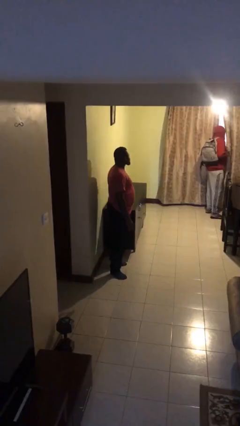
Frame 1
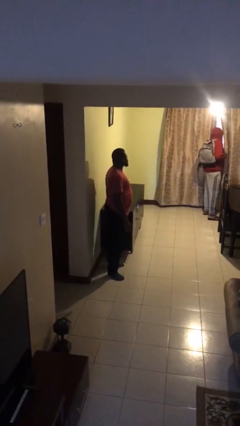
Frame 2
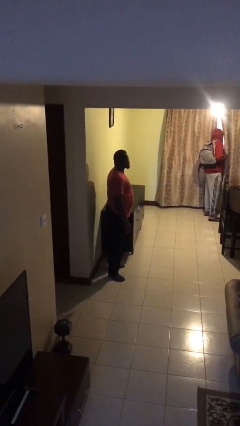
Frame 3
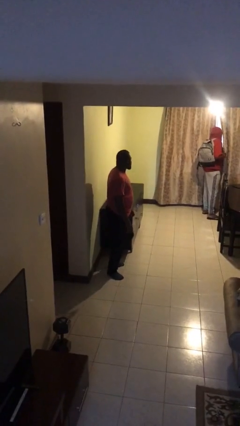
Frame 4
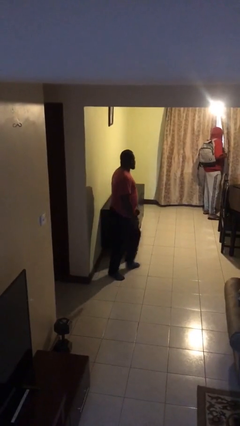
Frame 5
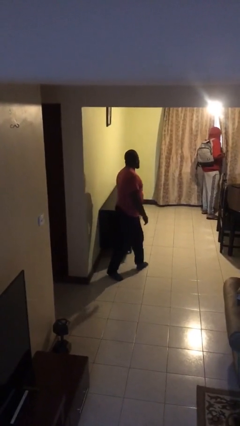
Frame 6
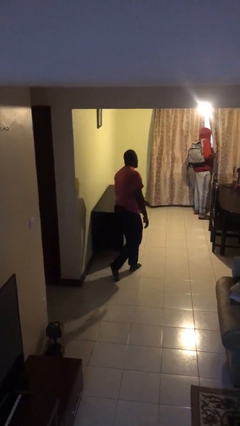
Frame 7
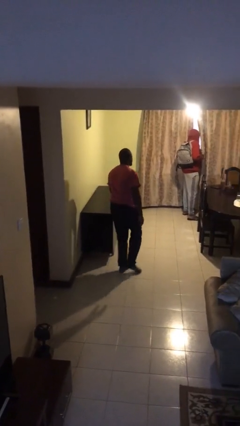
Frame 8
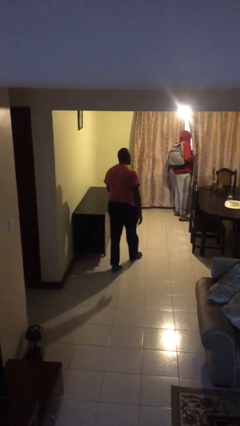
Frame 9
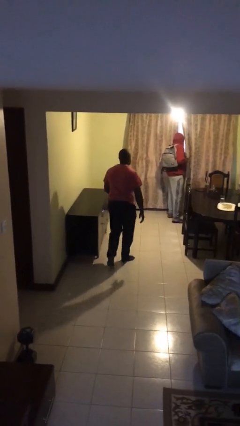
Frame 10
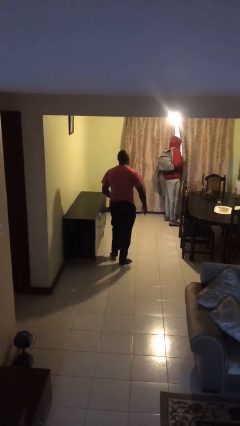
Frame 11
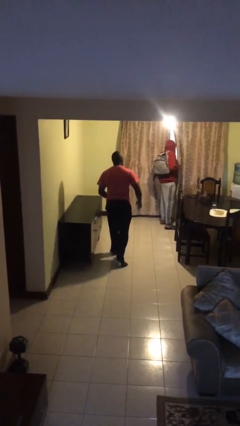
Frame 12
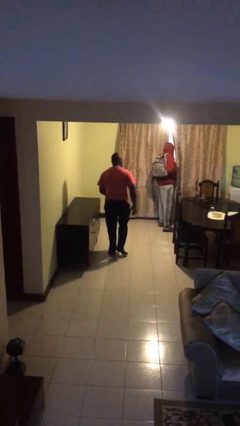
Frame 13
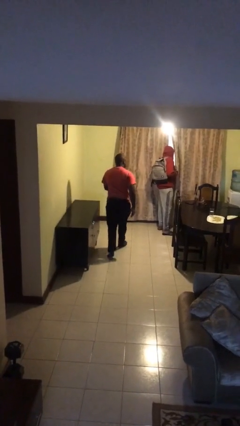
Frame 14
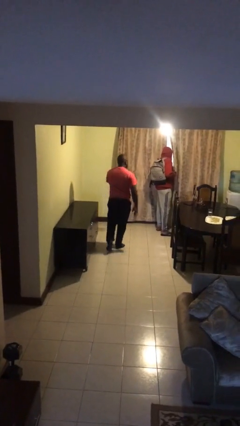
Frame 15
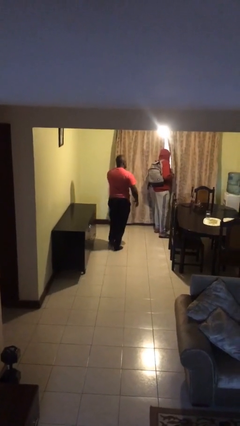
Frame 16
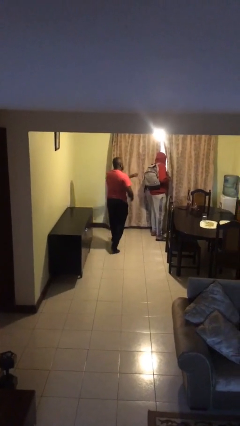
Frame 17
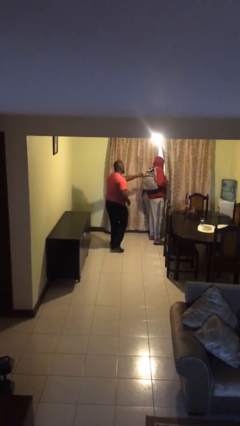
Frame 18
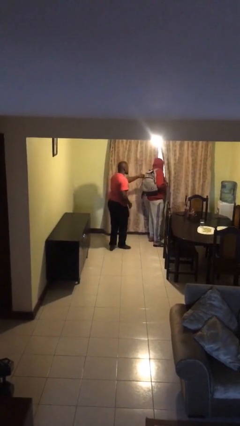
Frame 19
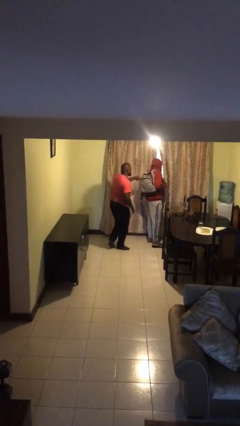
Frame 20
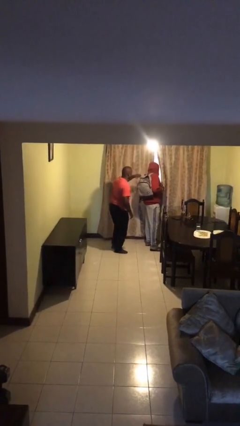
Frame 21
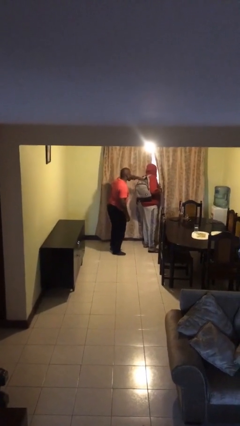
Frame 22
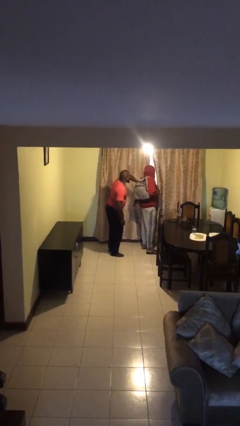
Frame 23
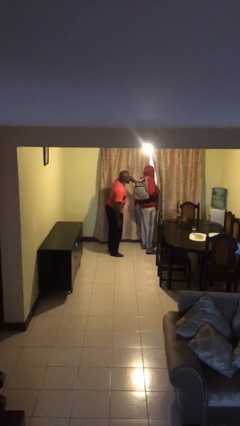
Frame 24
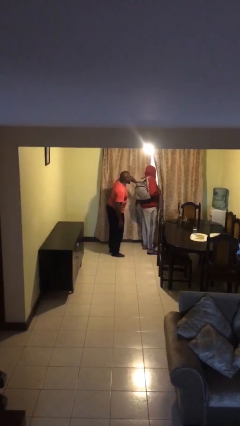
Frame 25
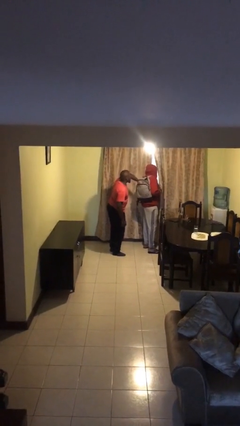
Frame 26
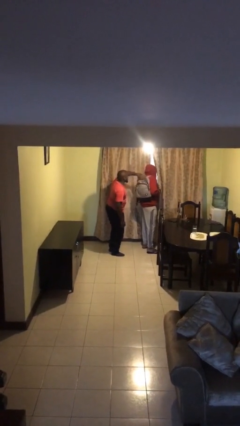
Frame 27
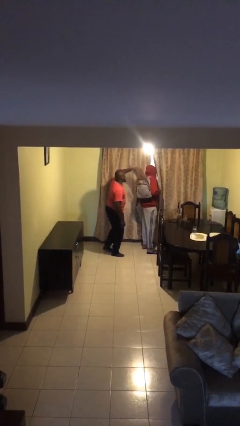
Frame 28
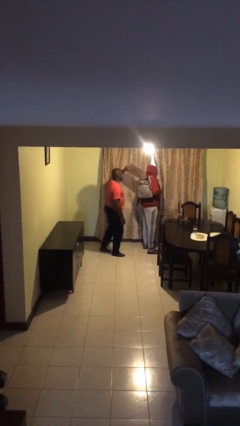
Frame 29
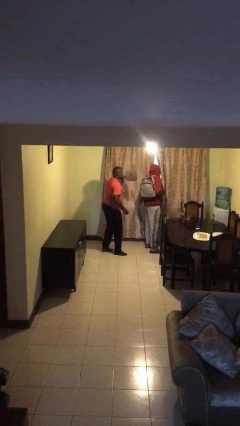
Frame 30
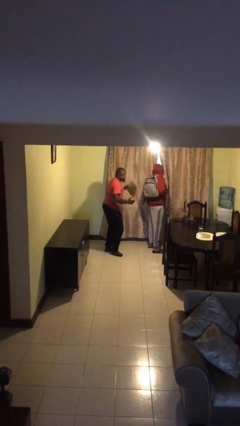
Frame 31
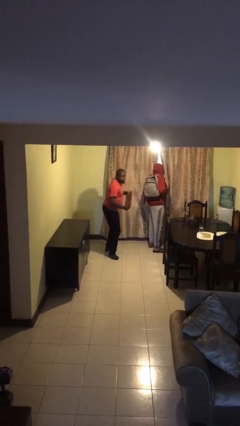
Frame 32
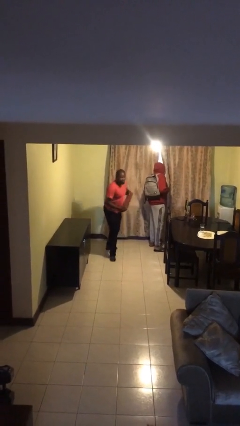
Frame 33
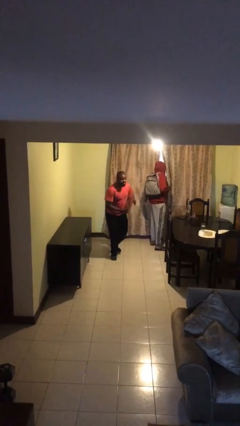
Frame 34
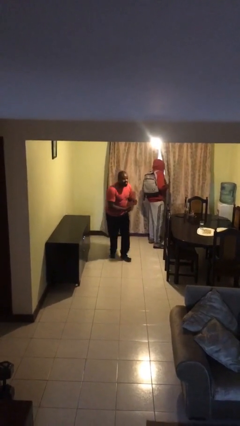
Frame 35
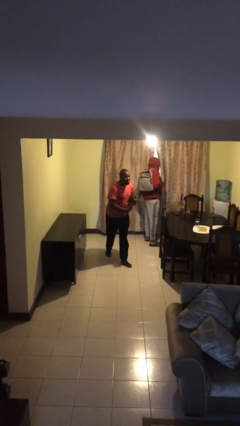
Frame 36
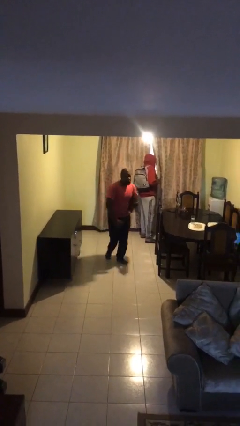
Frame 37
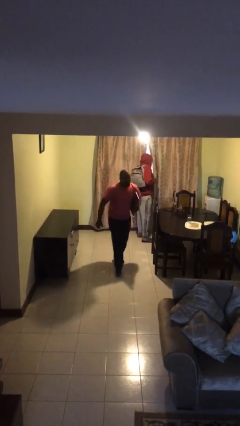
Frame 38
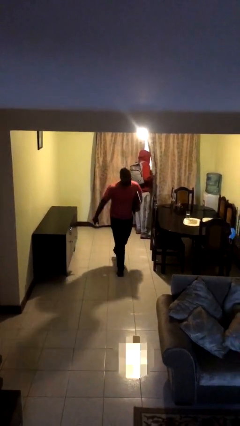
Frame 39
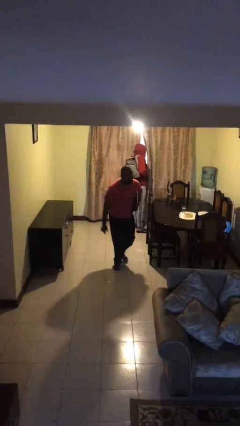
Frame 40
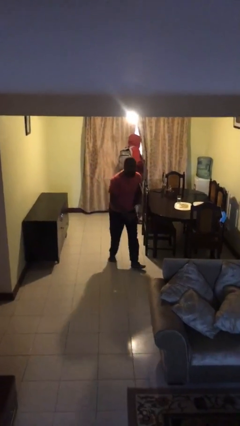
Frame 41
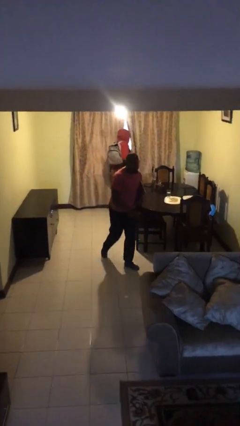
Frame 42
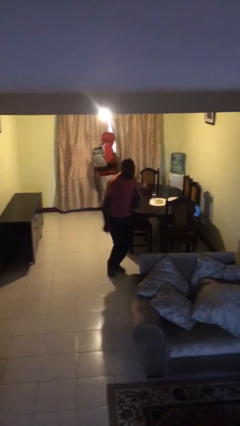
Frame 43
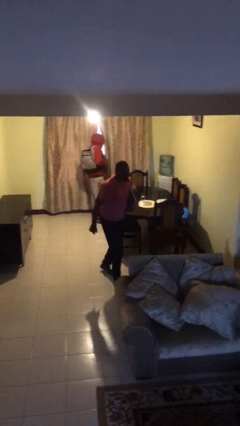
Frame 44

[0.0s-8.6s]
person steals object from person

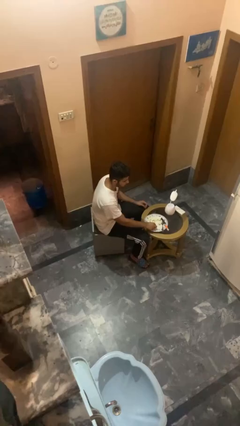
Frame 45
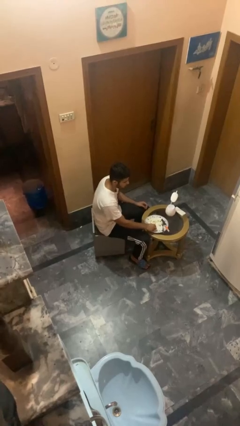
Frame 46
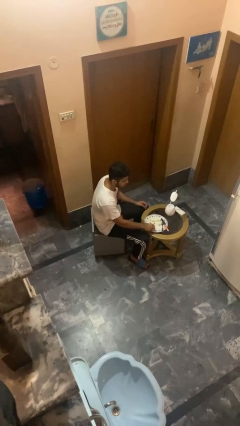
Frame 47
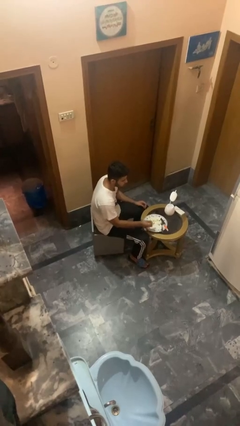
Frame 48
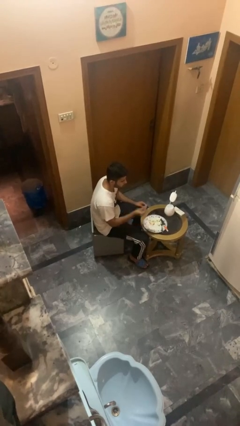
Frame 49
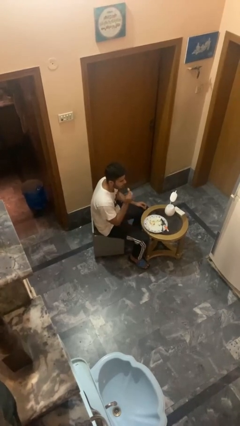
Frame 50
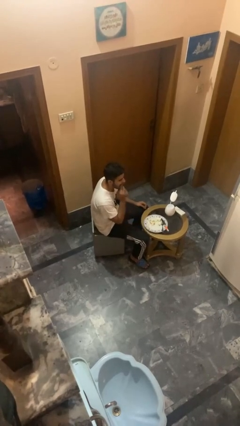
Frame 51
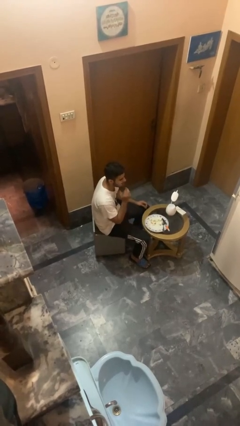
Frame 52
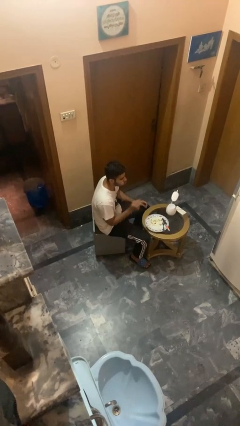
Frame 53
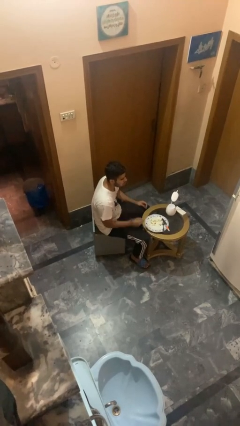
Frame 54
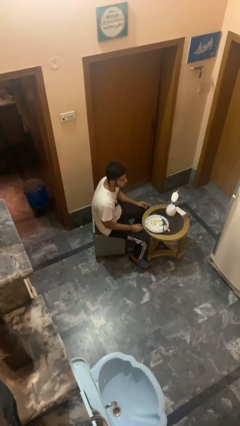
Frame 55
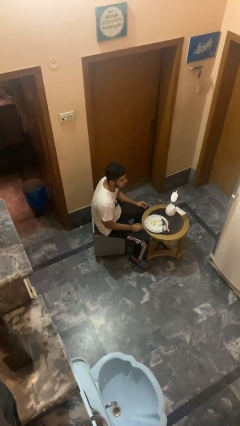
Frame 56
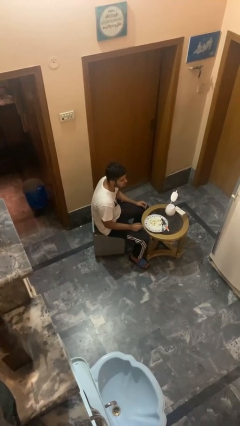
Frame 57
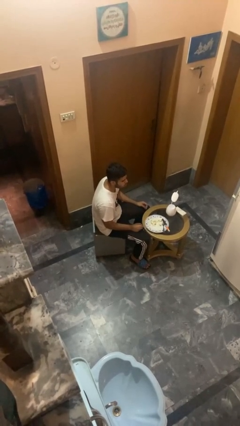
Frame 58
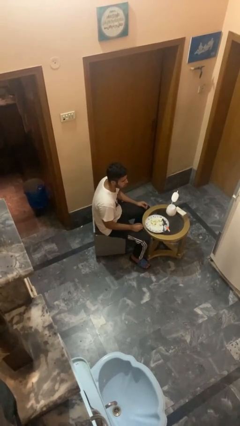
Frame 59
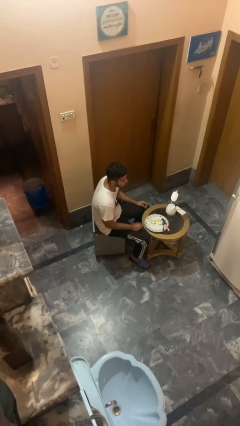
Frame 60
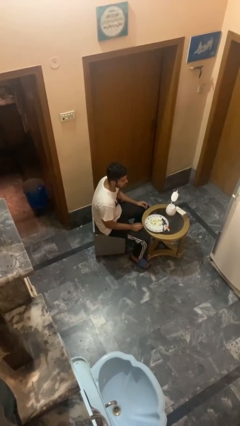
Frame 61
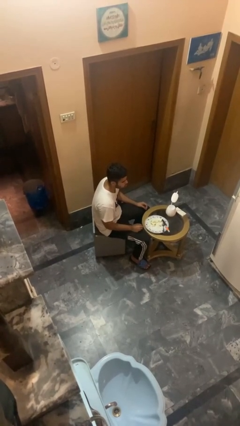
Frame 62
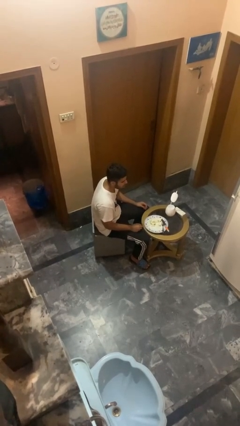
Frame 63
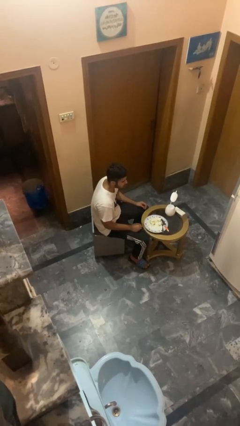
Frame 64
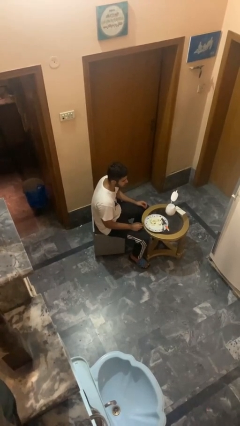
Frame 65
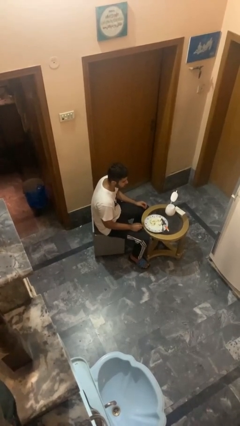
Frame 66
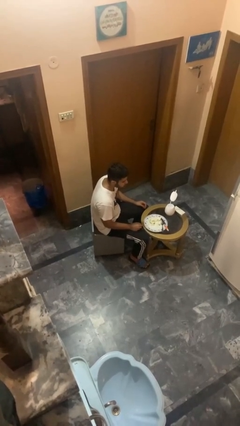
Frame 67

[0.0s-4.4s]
person eats with hands

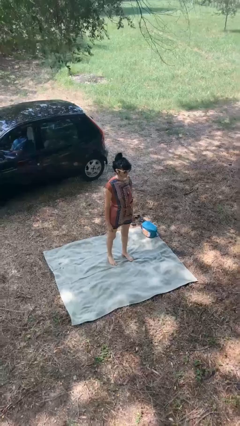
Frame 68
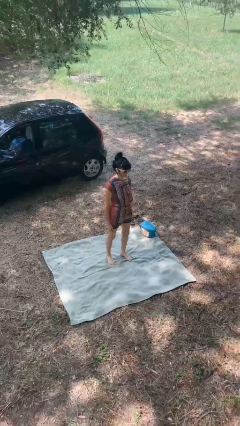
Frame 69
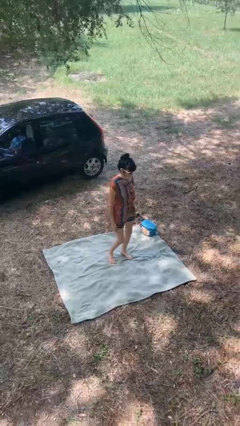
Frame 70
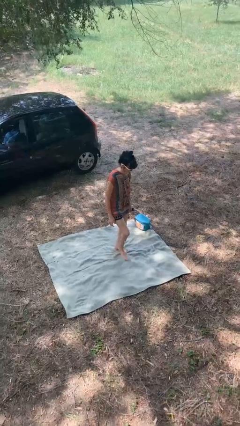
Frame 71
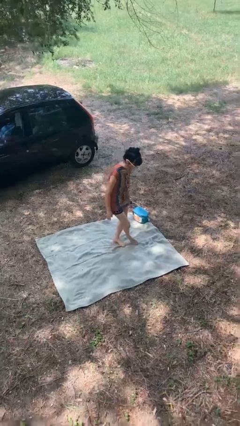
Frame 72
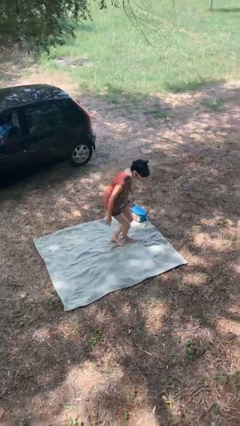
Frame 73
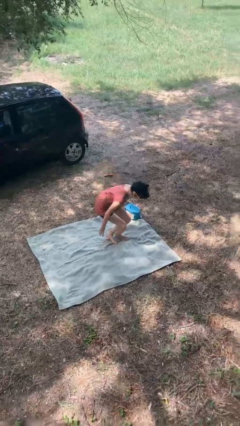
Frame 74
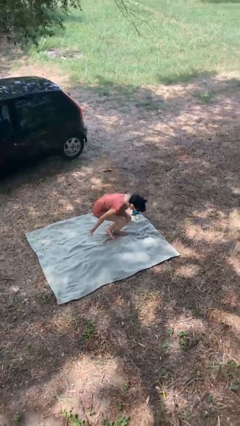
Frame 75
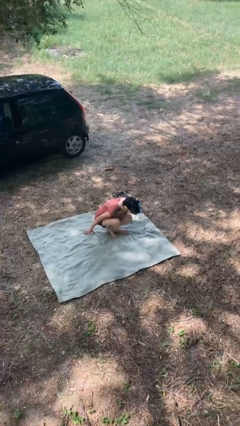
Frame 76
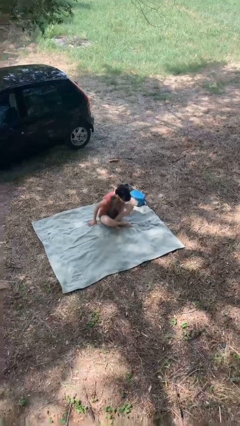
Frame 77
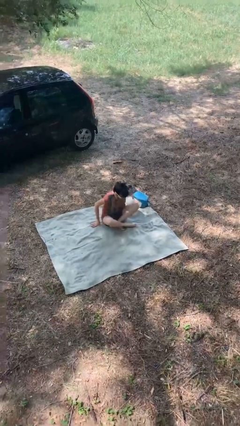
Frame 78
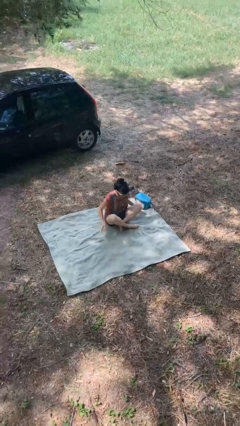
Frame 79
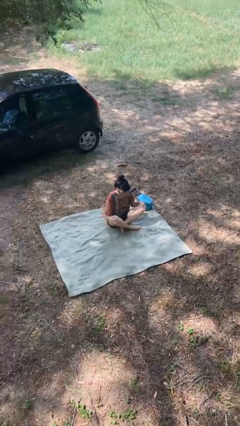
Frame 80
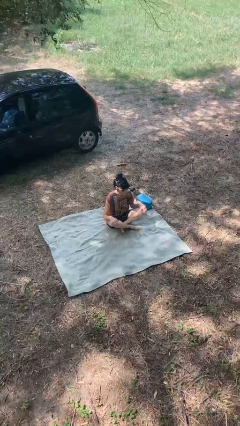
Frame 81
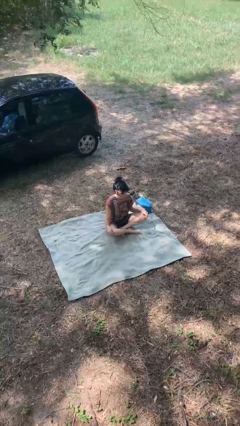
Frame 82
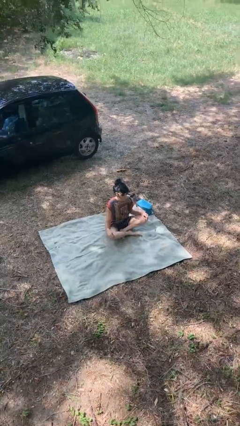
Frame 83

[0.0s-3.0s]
person sits crisscross

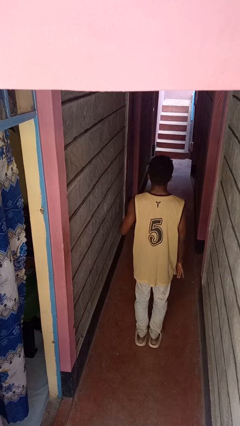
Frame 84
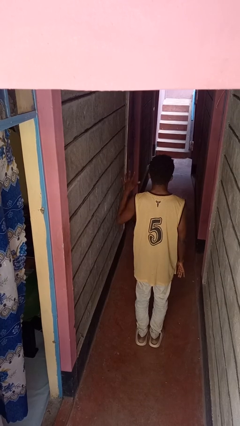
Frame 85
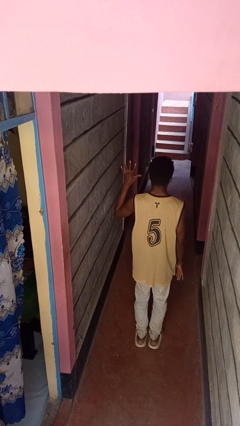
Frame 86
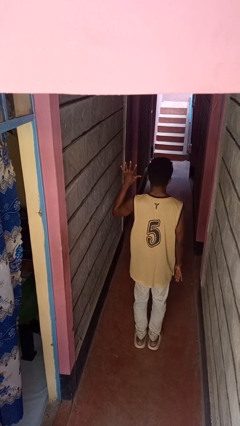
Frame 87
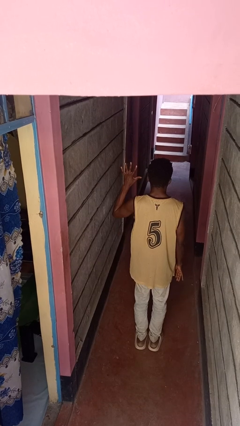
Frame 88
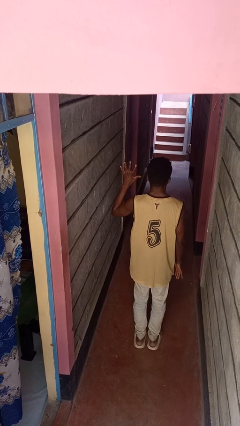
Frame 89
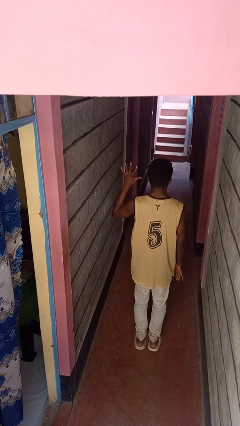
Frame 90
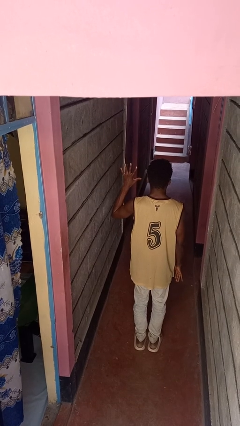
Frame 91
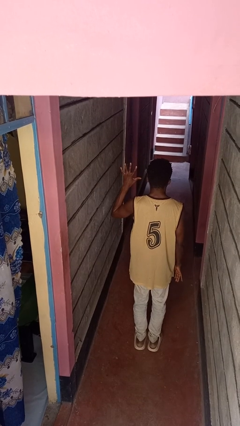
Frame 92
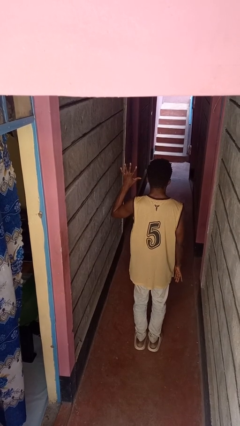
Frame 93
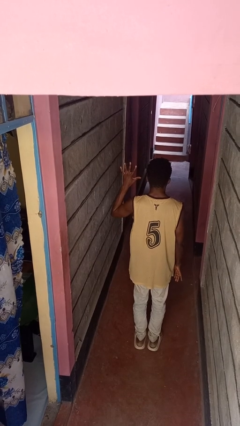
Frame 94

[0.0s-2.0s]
person gestures number five
